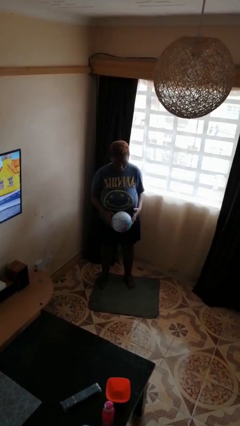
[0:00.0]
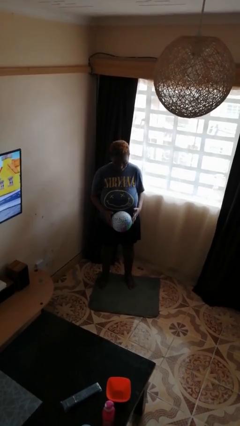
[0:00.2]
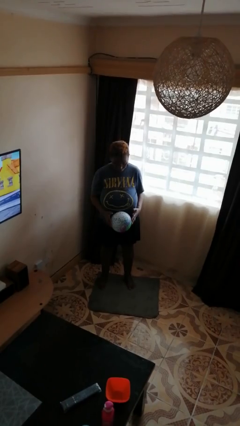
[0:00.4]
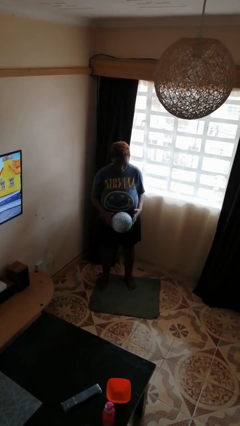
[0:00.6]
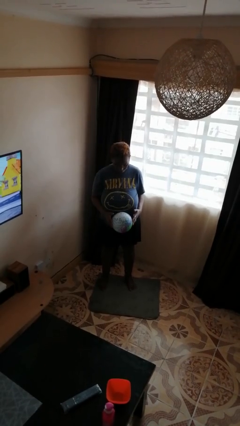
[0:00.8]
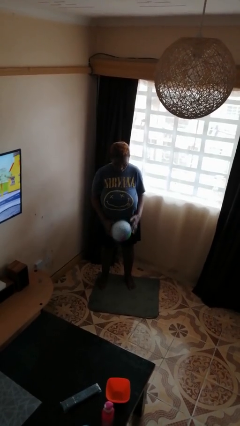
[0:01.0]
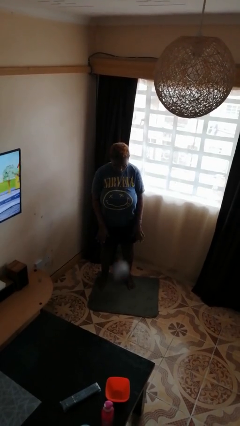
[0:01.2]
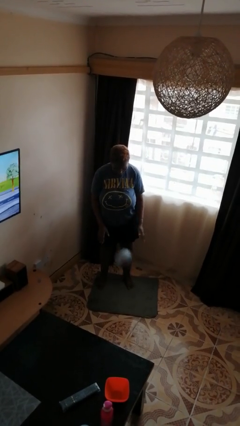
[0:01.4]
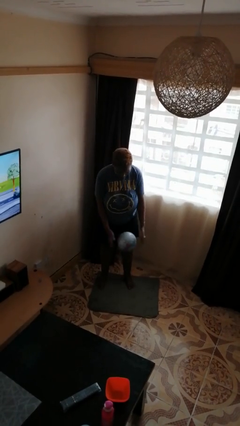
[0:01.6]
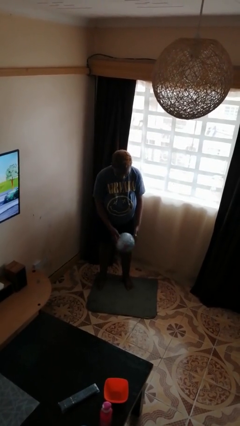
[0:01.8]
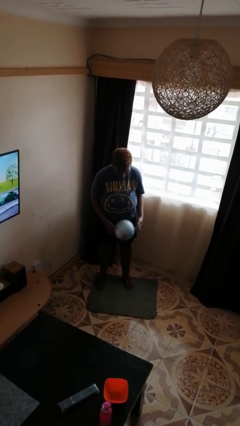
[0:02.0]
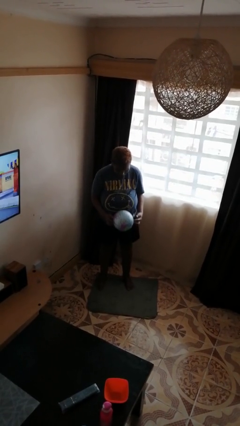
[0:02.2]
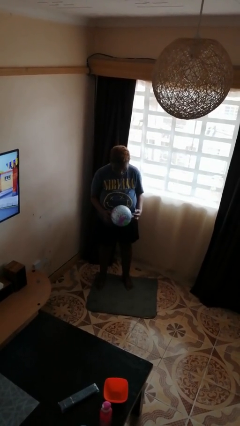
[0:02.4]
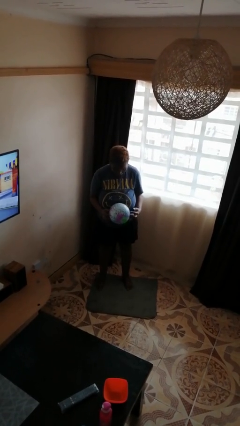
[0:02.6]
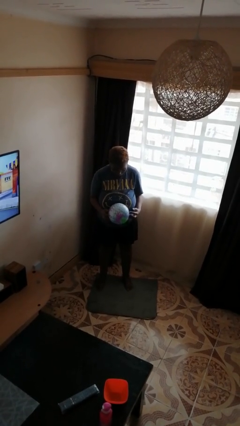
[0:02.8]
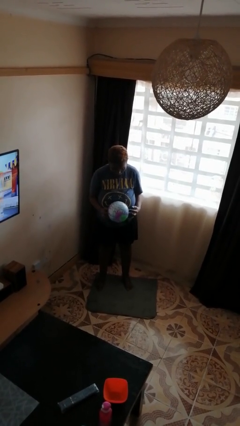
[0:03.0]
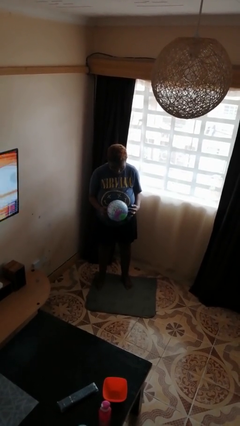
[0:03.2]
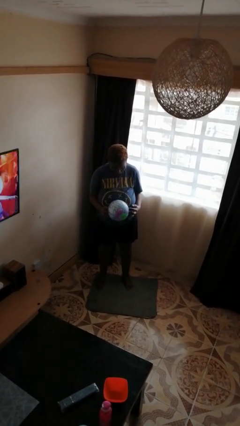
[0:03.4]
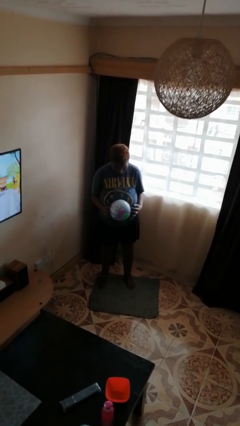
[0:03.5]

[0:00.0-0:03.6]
person bounces ball on floor

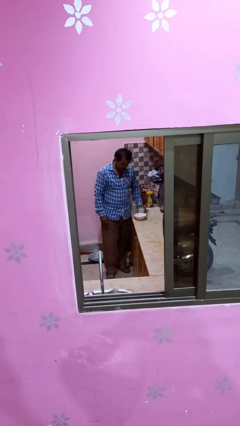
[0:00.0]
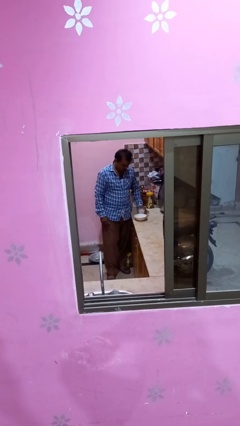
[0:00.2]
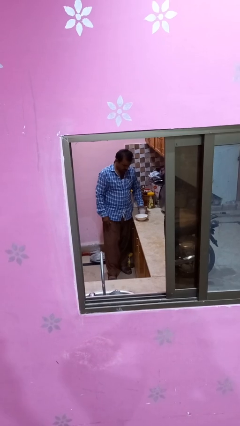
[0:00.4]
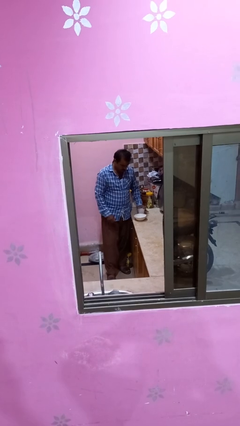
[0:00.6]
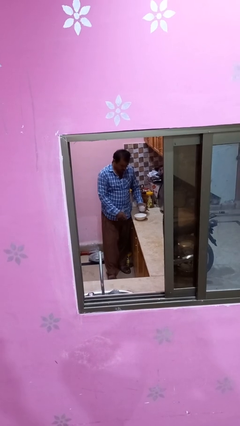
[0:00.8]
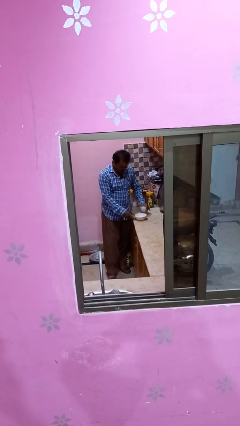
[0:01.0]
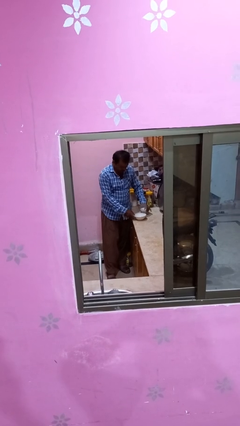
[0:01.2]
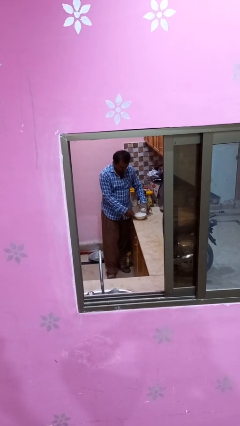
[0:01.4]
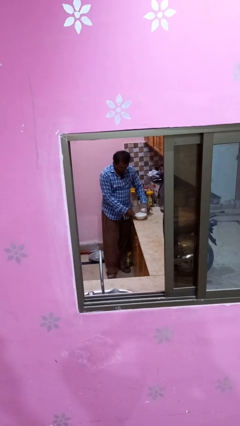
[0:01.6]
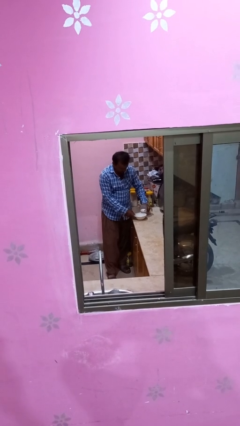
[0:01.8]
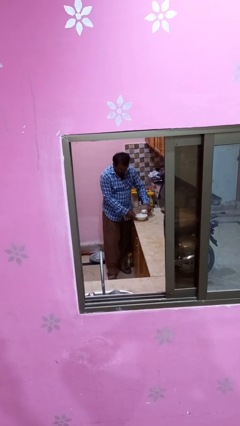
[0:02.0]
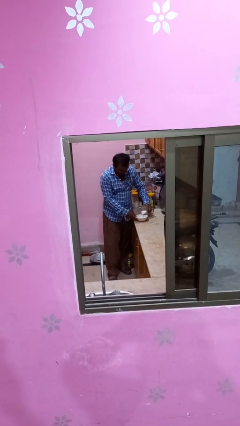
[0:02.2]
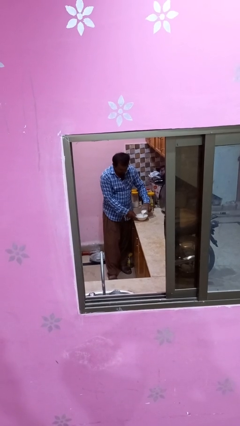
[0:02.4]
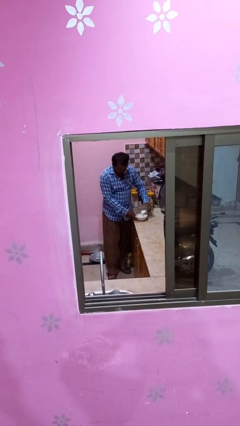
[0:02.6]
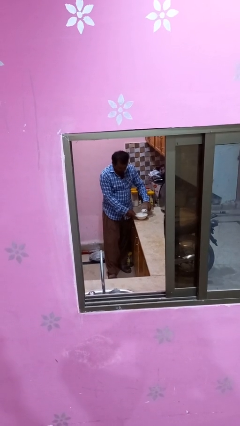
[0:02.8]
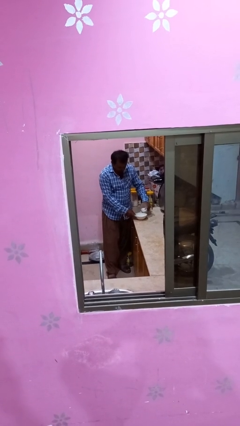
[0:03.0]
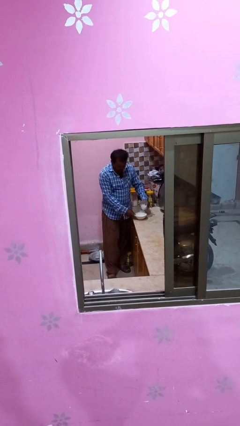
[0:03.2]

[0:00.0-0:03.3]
person pours into bowl

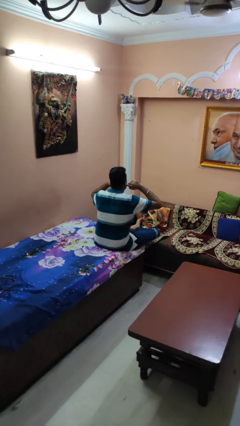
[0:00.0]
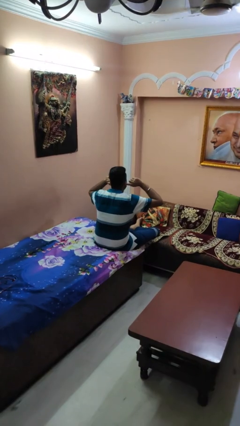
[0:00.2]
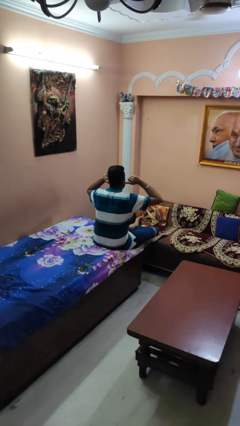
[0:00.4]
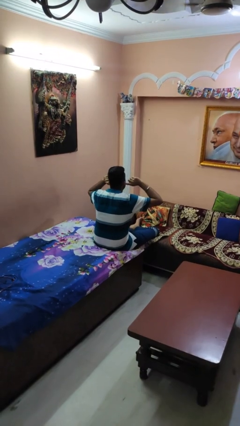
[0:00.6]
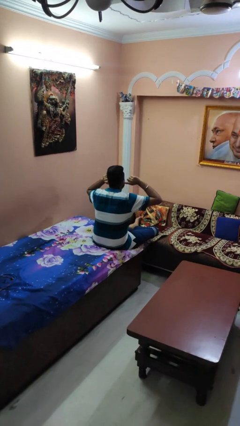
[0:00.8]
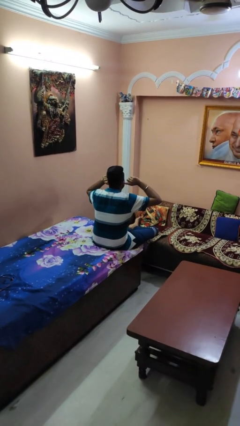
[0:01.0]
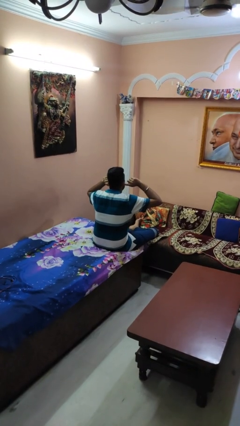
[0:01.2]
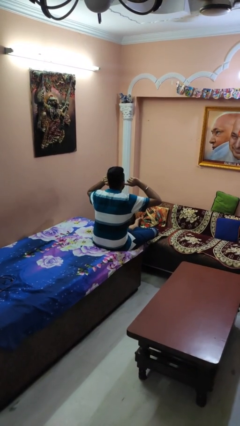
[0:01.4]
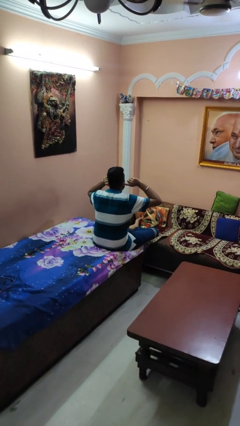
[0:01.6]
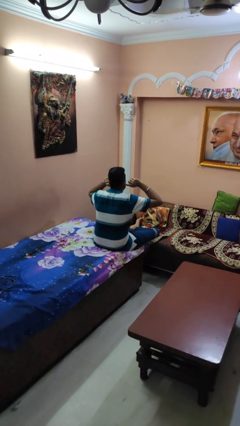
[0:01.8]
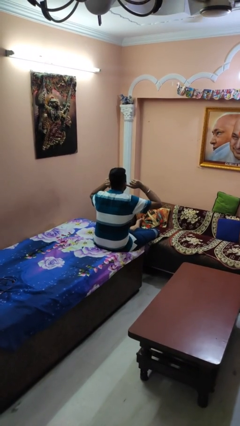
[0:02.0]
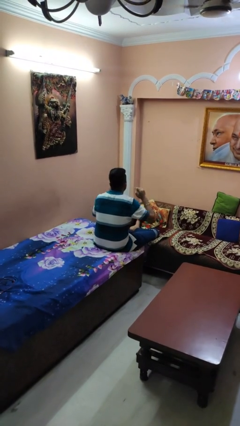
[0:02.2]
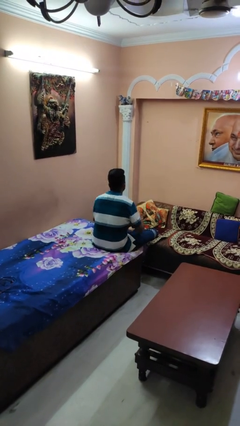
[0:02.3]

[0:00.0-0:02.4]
person puts fingers in ear

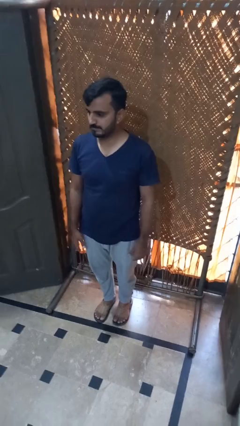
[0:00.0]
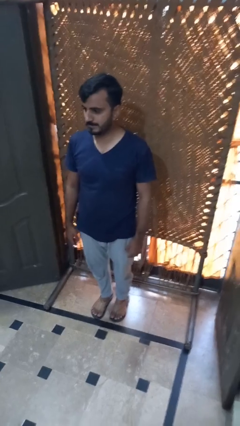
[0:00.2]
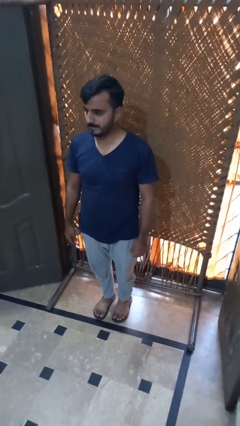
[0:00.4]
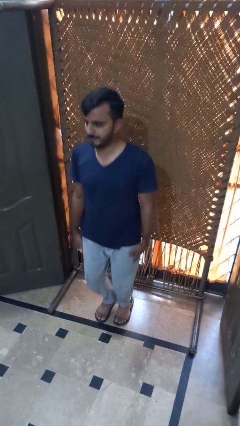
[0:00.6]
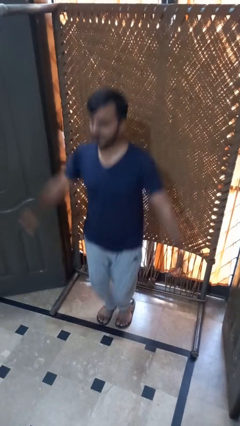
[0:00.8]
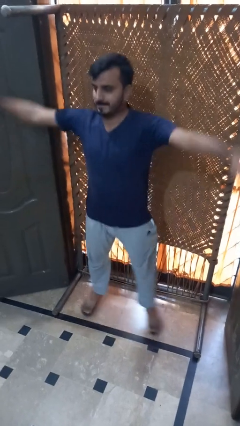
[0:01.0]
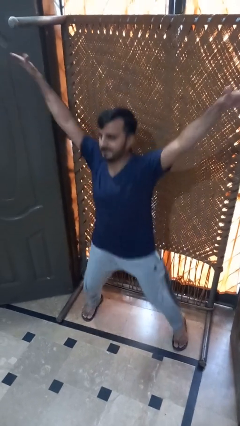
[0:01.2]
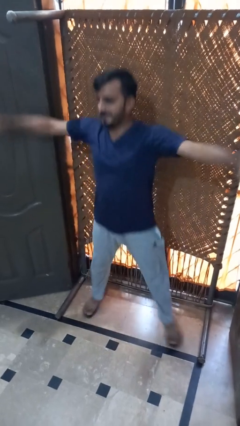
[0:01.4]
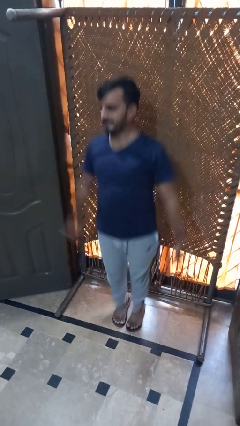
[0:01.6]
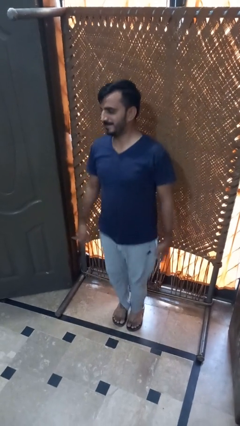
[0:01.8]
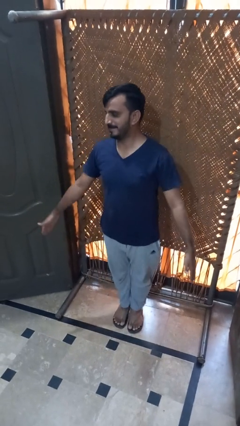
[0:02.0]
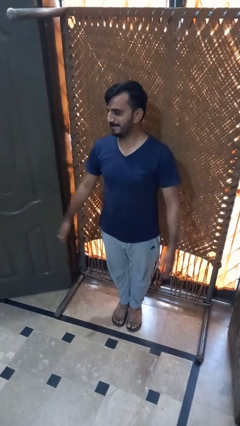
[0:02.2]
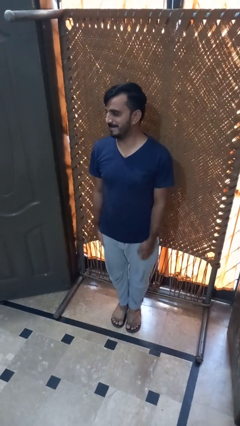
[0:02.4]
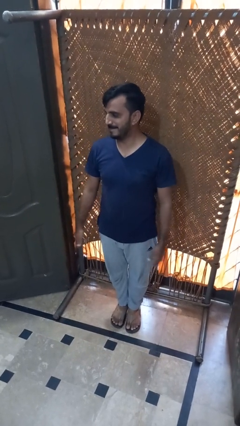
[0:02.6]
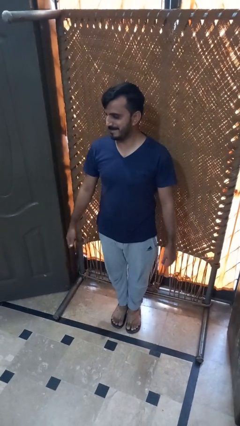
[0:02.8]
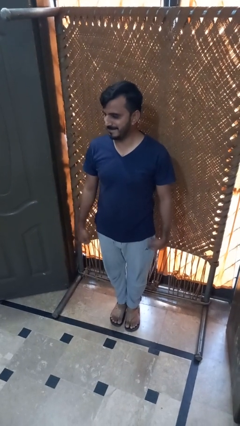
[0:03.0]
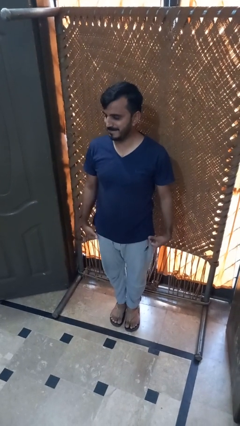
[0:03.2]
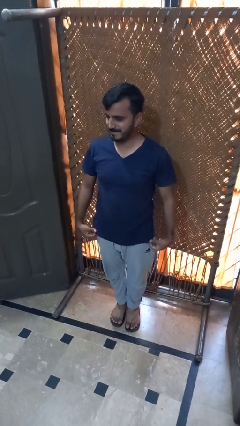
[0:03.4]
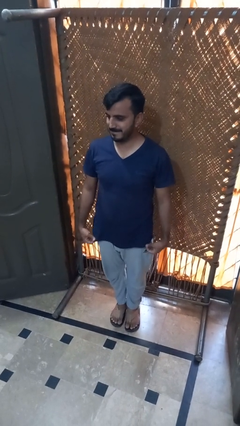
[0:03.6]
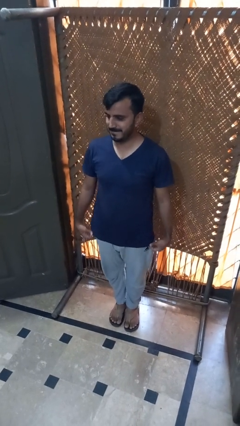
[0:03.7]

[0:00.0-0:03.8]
person exercises with jumping jacks

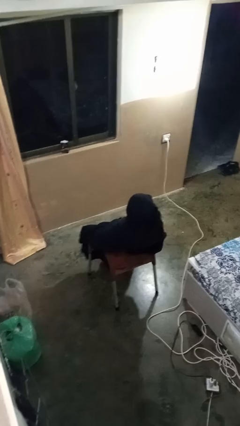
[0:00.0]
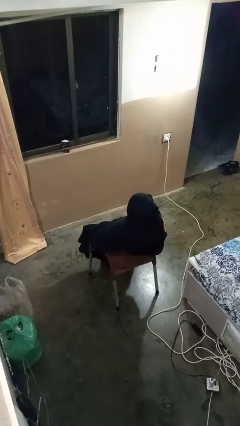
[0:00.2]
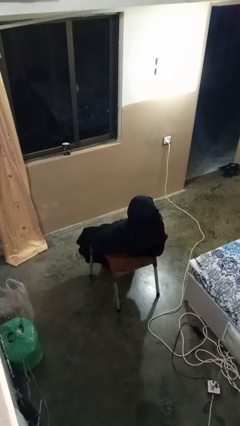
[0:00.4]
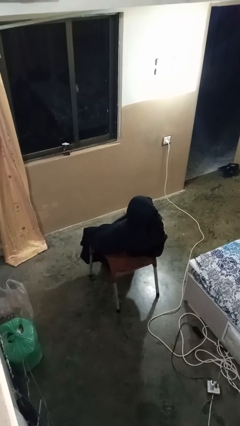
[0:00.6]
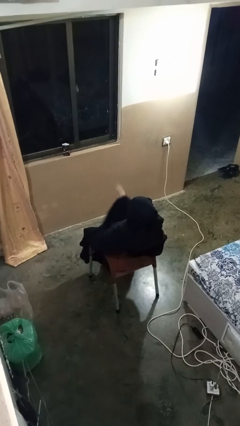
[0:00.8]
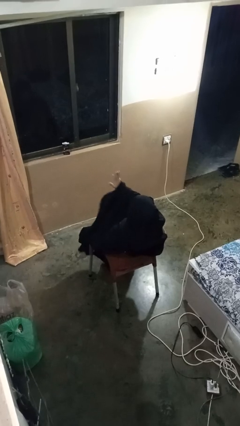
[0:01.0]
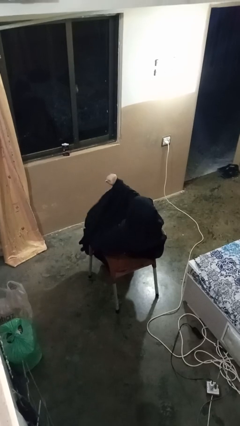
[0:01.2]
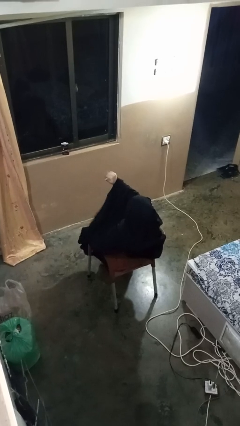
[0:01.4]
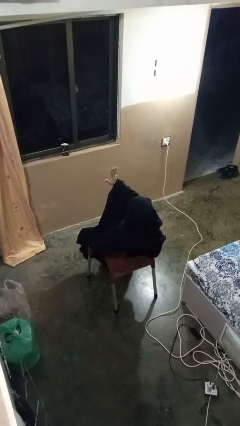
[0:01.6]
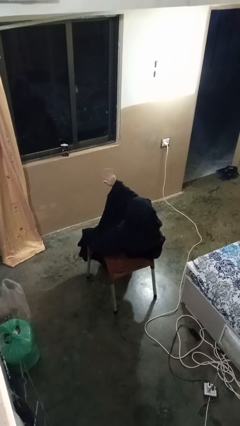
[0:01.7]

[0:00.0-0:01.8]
person gestures come here

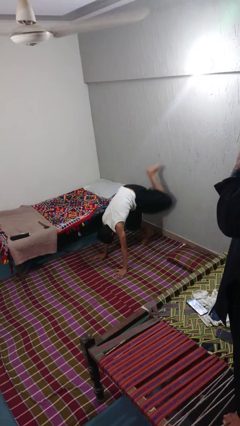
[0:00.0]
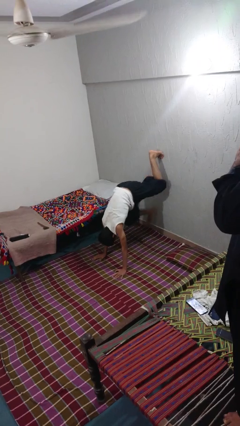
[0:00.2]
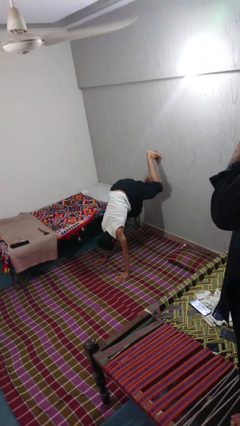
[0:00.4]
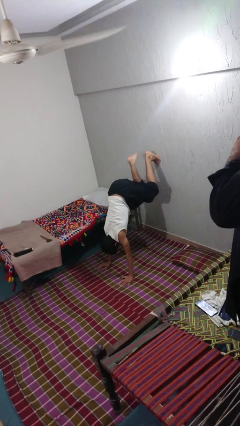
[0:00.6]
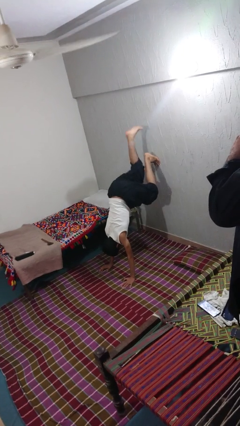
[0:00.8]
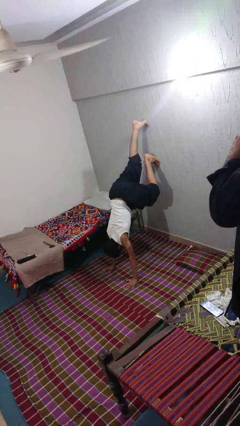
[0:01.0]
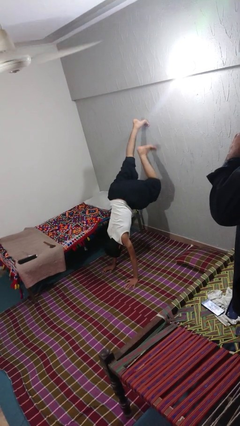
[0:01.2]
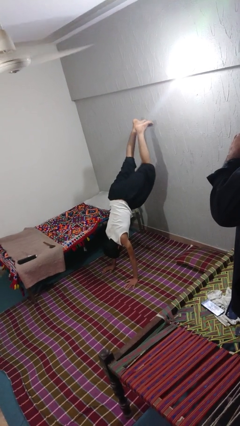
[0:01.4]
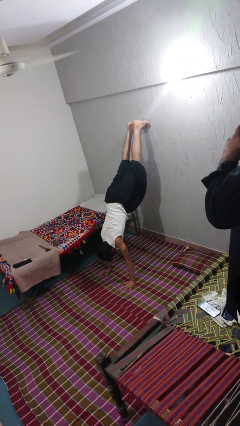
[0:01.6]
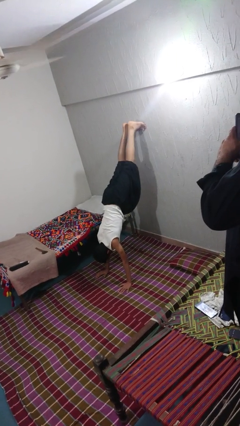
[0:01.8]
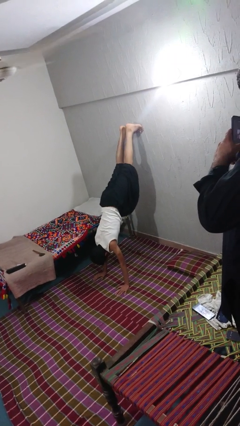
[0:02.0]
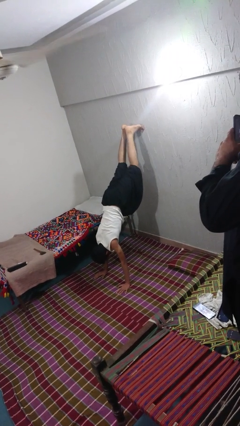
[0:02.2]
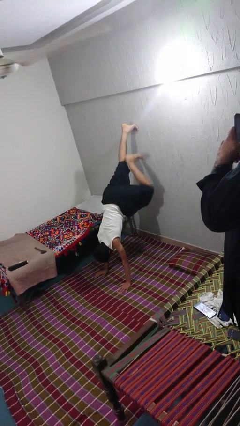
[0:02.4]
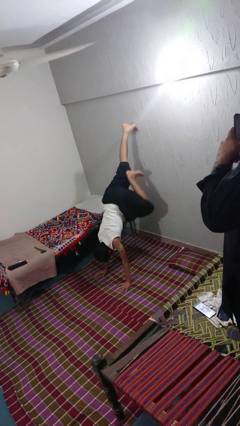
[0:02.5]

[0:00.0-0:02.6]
person handstand

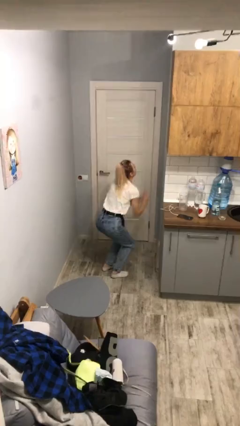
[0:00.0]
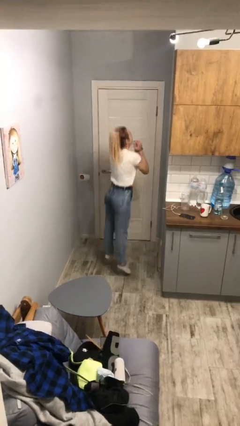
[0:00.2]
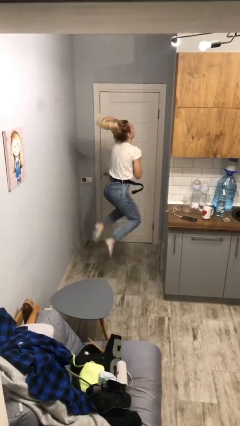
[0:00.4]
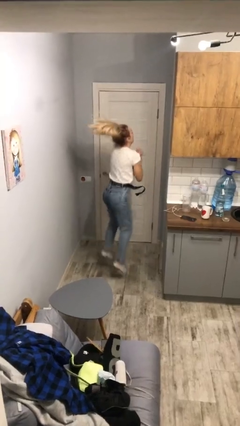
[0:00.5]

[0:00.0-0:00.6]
person jumps
